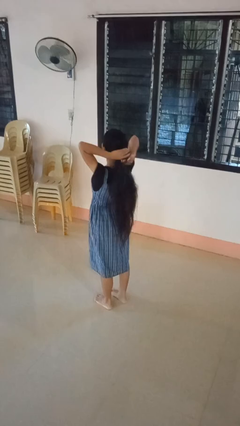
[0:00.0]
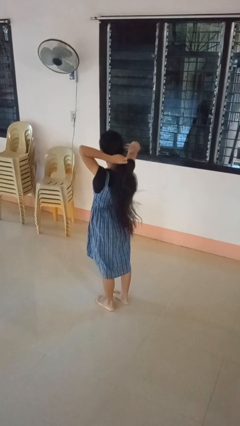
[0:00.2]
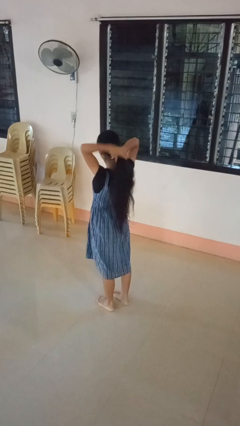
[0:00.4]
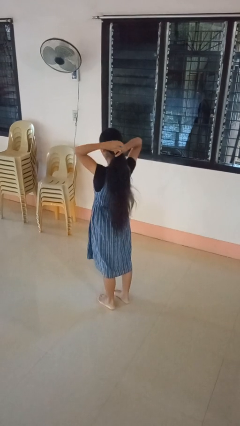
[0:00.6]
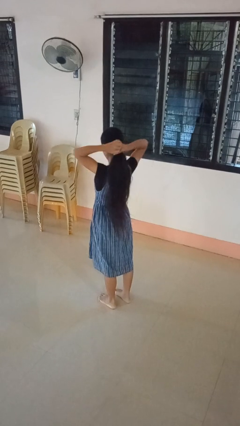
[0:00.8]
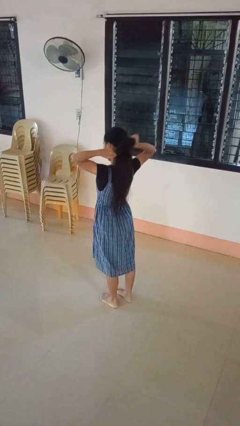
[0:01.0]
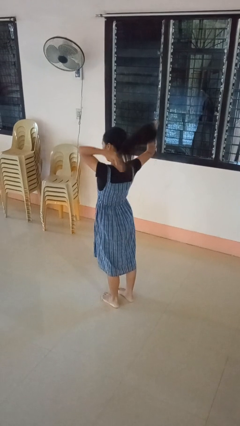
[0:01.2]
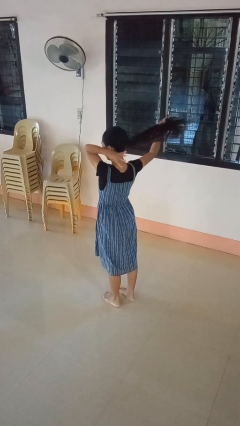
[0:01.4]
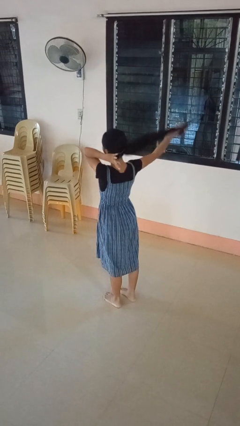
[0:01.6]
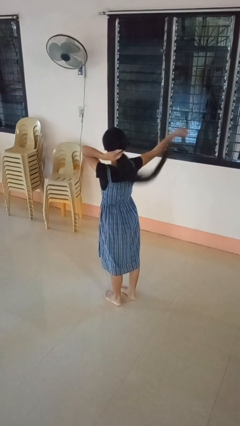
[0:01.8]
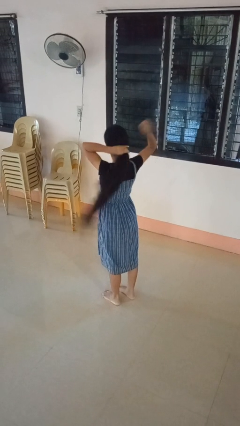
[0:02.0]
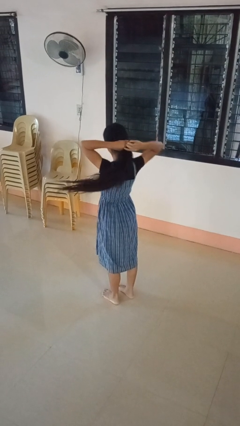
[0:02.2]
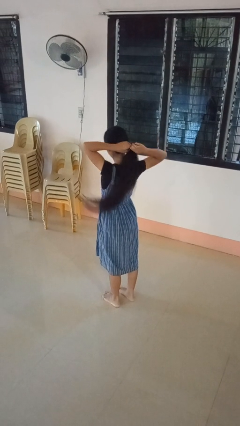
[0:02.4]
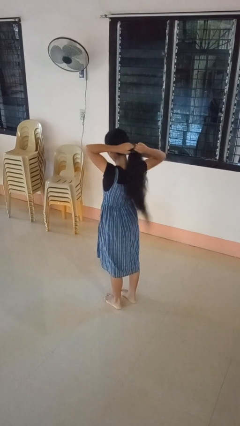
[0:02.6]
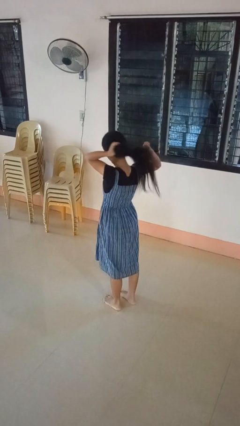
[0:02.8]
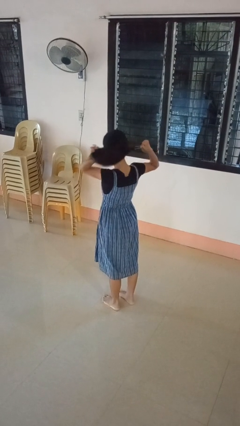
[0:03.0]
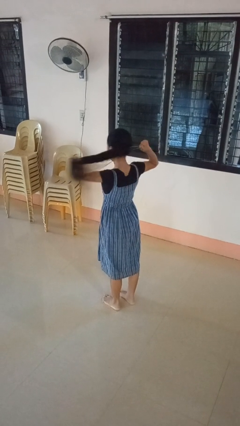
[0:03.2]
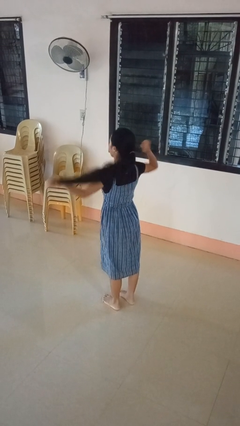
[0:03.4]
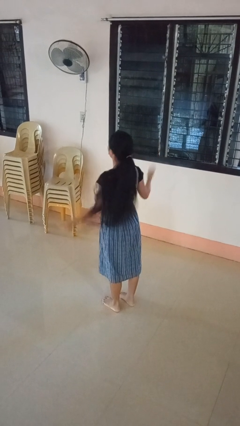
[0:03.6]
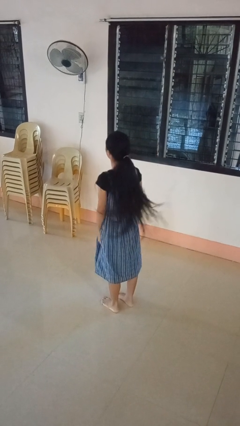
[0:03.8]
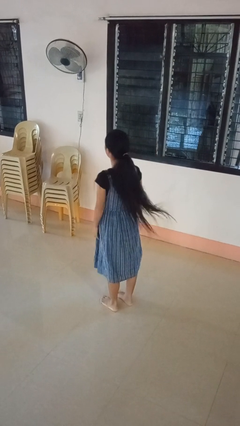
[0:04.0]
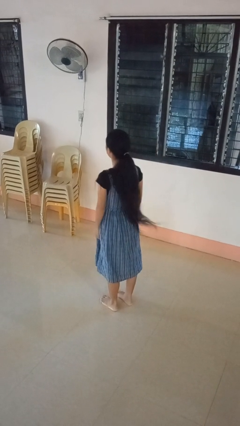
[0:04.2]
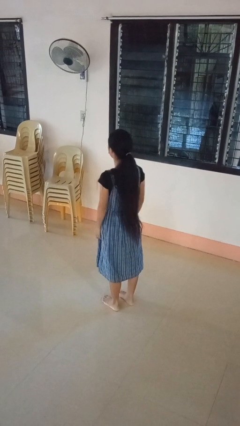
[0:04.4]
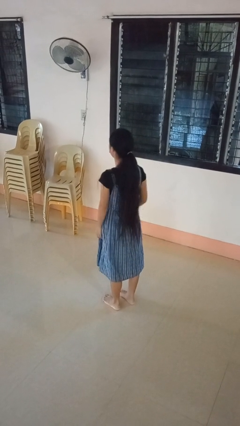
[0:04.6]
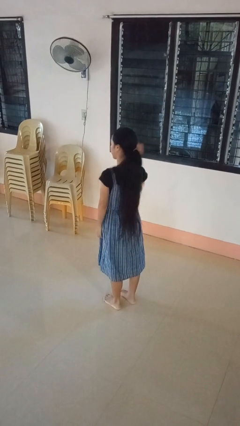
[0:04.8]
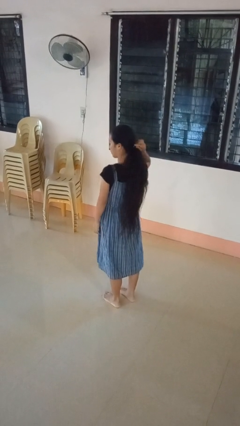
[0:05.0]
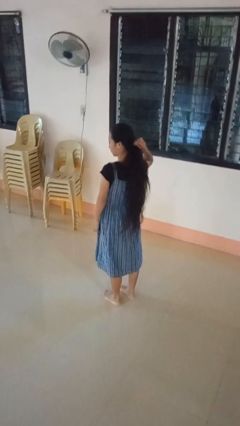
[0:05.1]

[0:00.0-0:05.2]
person puts hair in ponytail

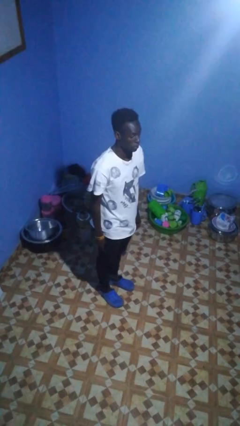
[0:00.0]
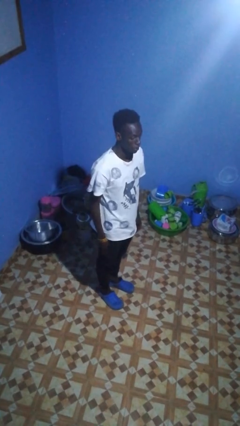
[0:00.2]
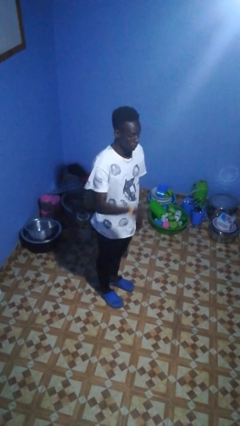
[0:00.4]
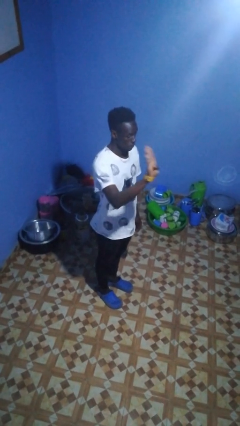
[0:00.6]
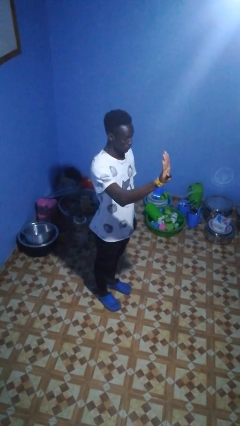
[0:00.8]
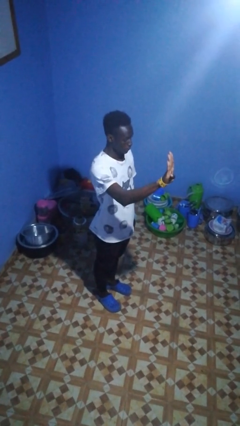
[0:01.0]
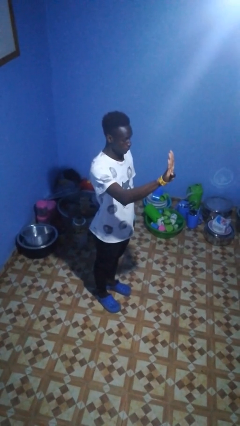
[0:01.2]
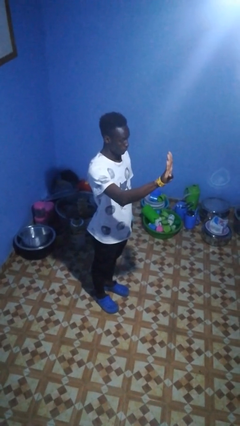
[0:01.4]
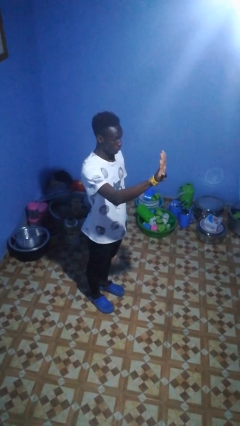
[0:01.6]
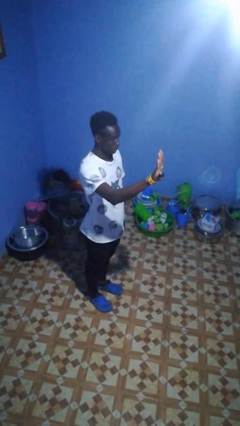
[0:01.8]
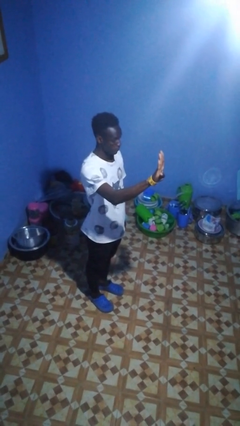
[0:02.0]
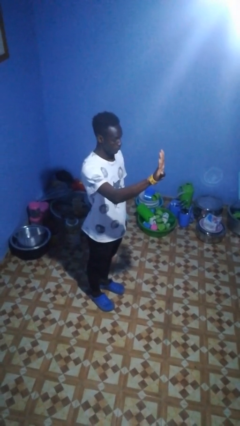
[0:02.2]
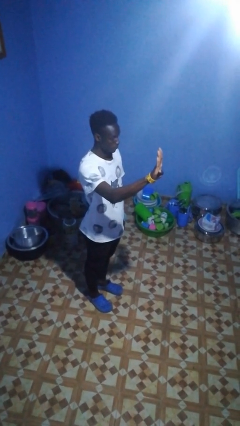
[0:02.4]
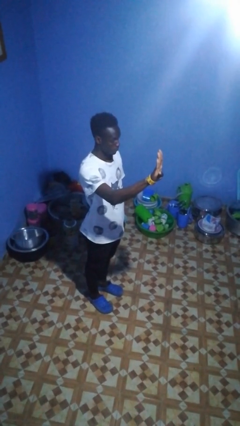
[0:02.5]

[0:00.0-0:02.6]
person gestures number four

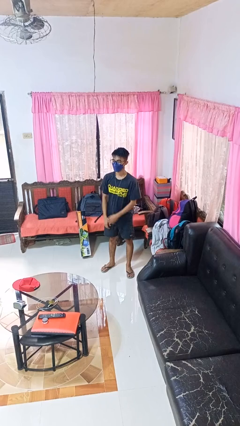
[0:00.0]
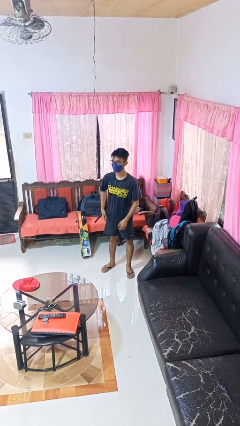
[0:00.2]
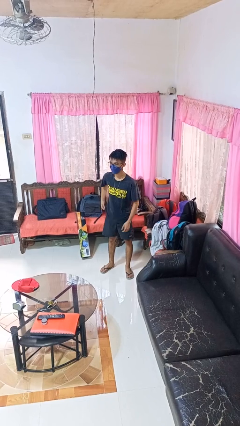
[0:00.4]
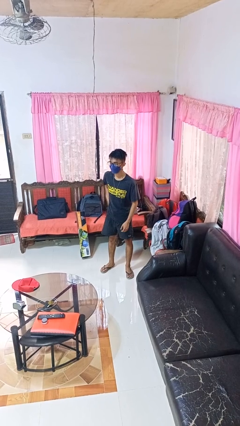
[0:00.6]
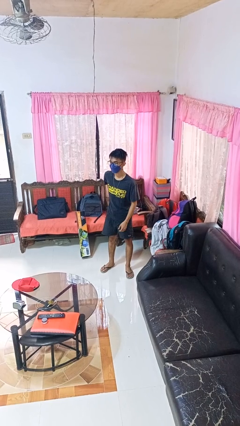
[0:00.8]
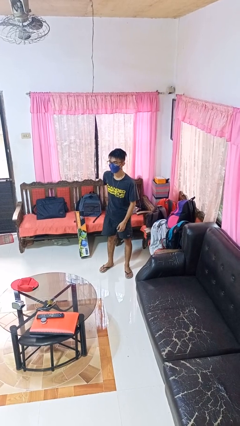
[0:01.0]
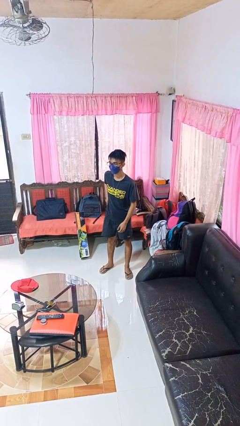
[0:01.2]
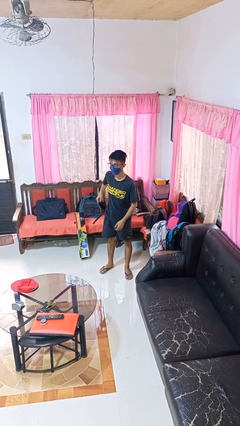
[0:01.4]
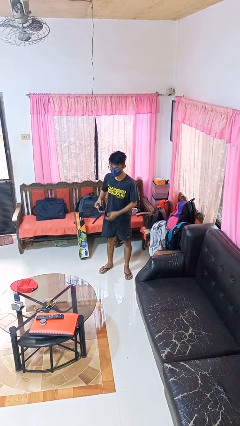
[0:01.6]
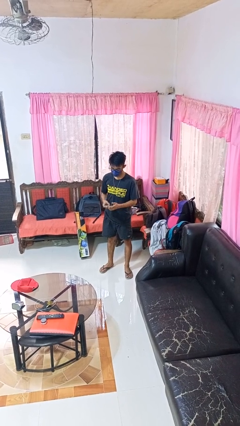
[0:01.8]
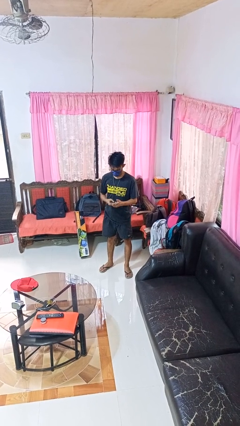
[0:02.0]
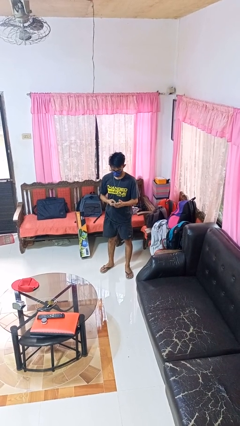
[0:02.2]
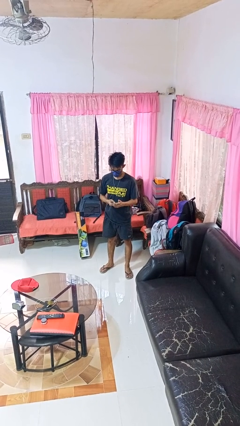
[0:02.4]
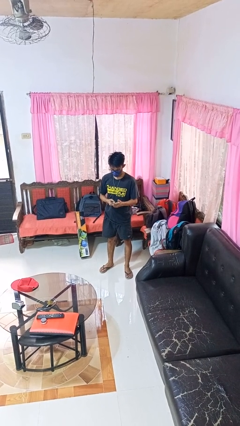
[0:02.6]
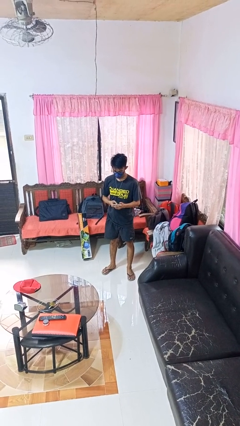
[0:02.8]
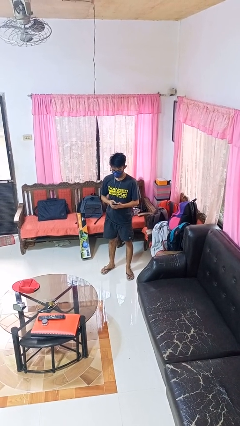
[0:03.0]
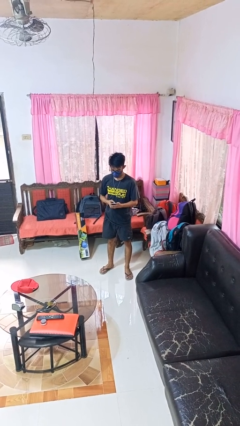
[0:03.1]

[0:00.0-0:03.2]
person takes phone from pocket

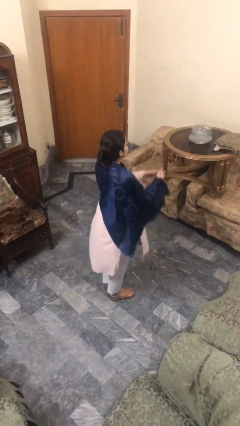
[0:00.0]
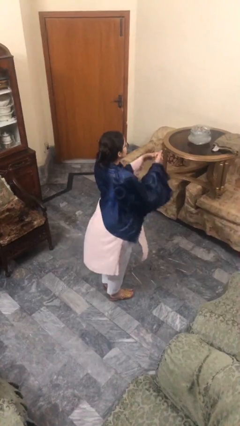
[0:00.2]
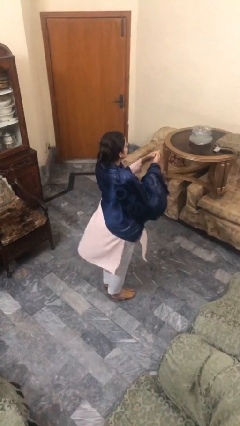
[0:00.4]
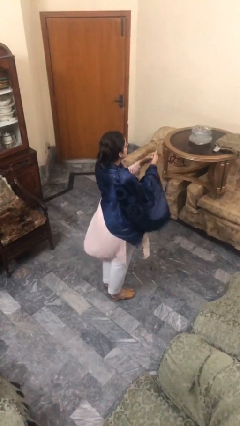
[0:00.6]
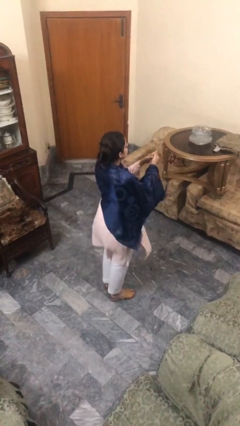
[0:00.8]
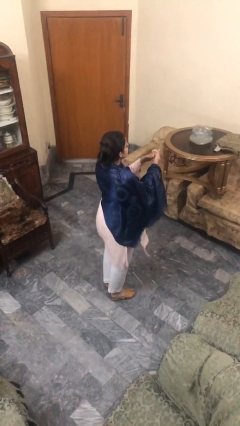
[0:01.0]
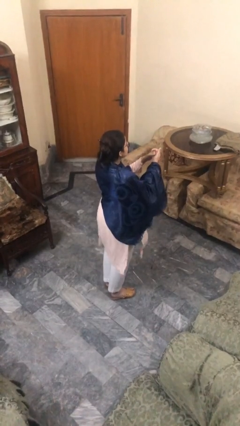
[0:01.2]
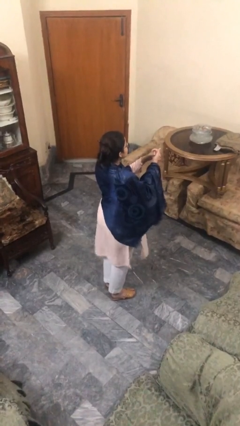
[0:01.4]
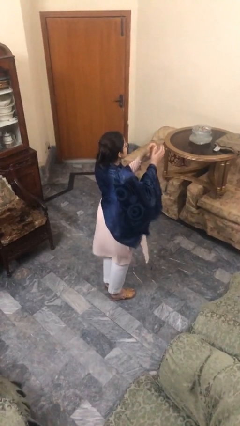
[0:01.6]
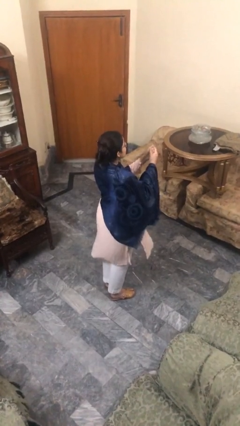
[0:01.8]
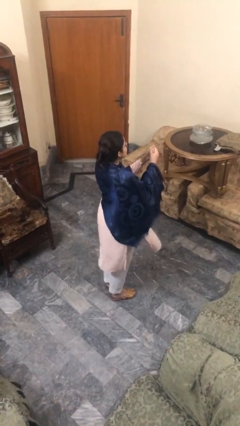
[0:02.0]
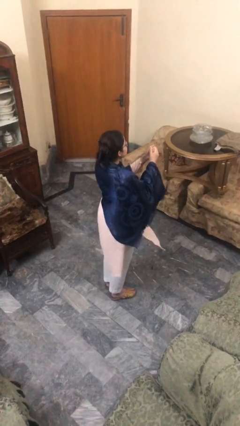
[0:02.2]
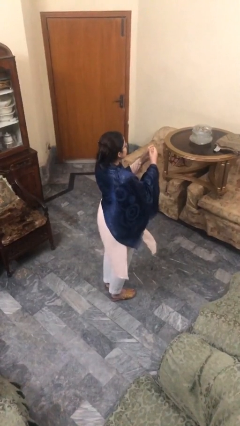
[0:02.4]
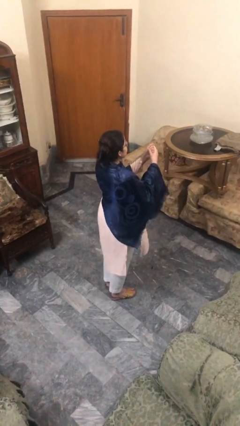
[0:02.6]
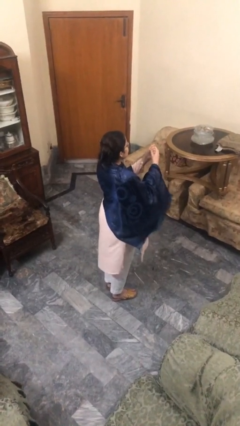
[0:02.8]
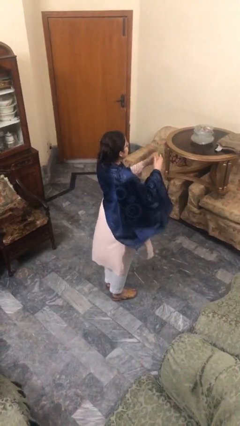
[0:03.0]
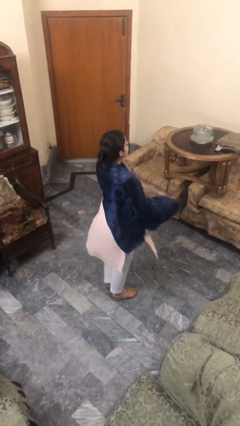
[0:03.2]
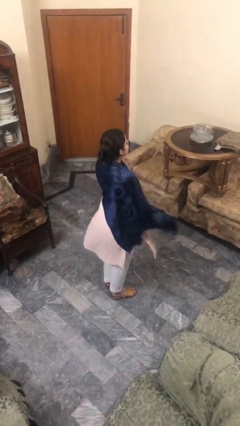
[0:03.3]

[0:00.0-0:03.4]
person cracks knuckles

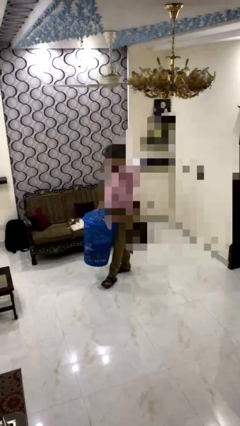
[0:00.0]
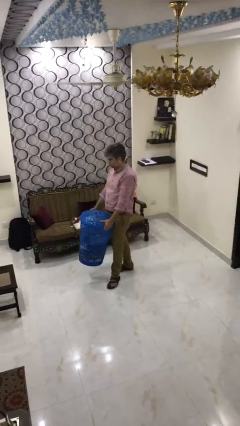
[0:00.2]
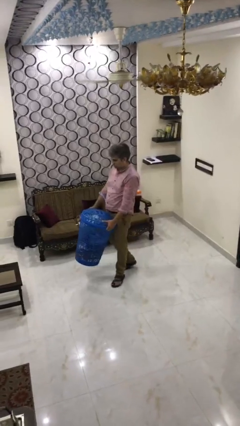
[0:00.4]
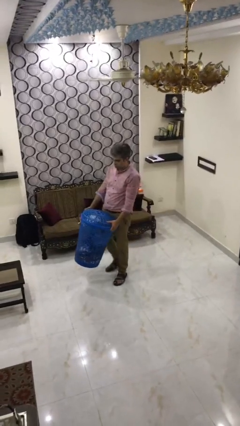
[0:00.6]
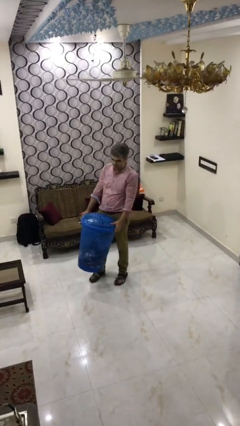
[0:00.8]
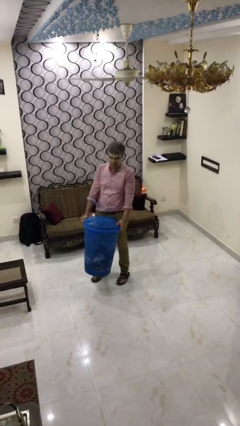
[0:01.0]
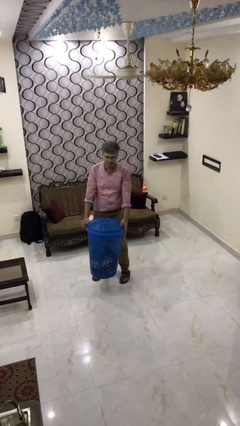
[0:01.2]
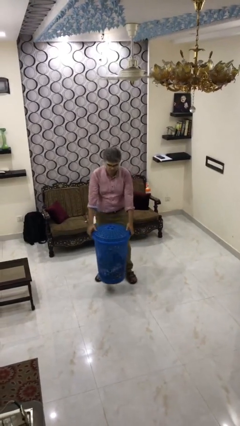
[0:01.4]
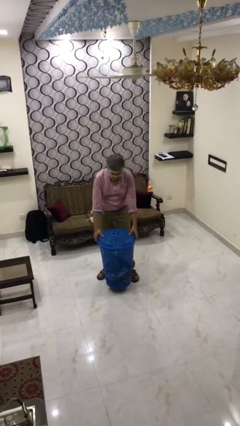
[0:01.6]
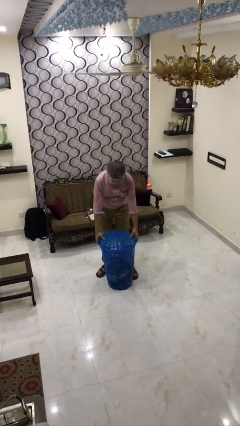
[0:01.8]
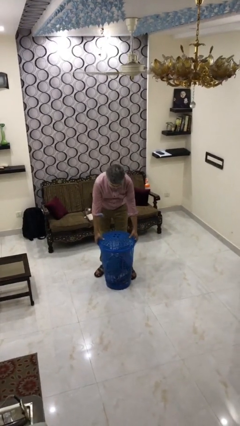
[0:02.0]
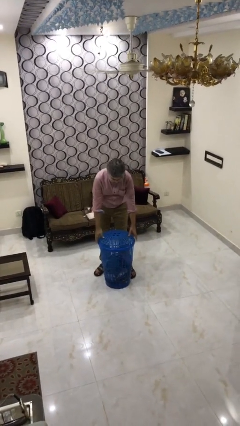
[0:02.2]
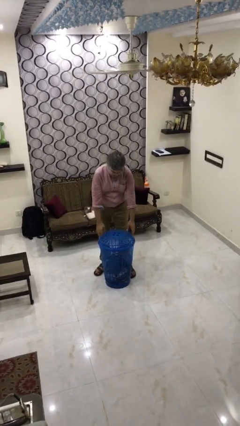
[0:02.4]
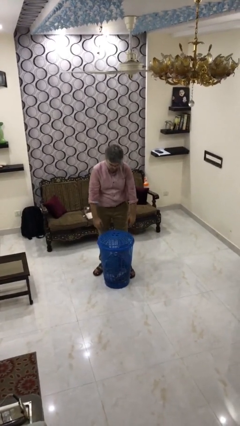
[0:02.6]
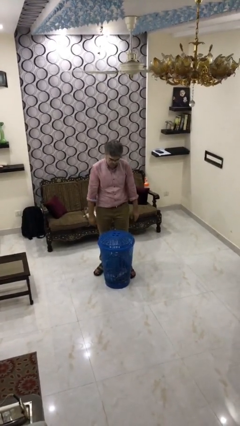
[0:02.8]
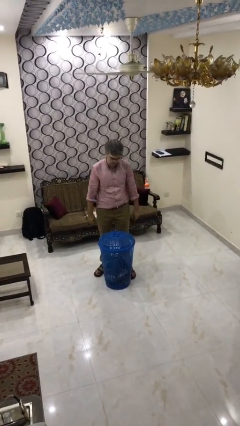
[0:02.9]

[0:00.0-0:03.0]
person puts down object on floor
